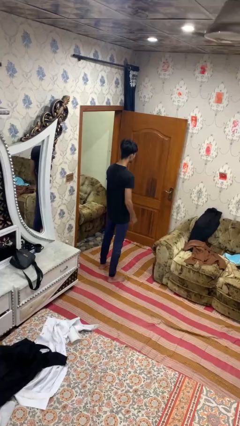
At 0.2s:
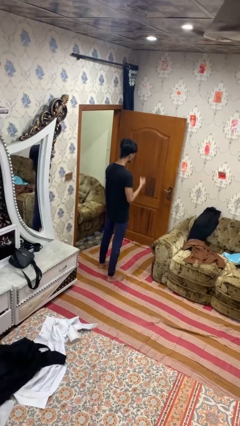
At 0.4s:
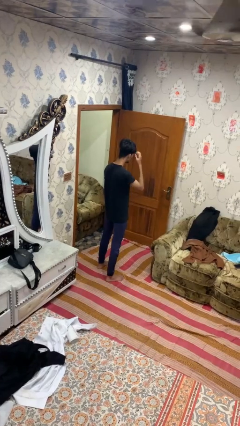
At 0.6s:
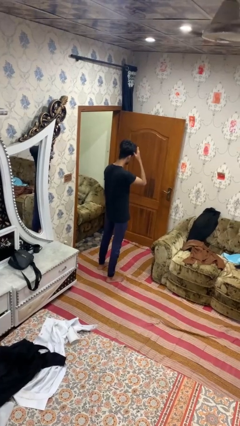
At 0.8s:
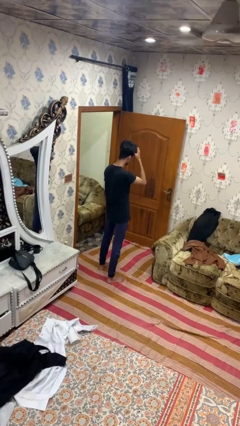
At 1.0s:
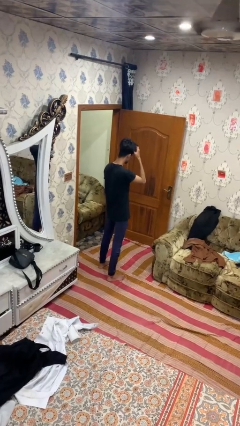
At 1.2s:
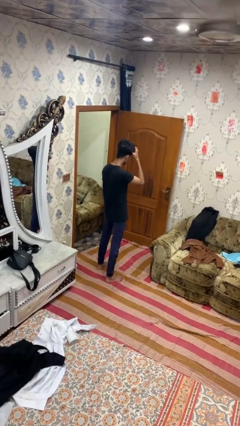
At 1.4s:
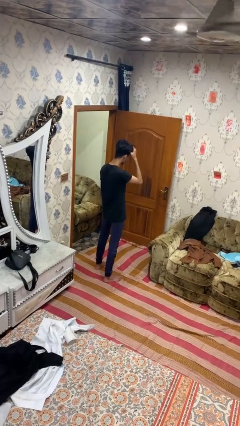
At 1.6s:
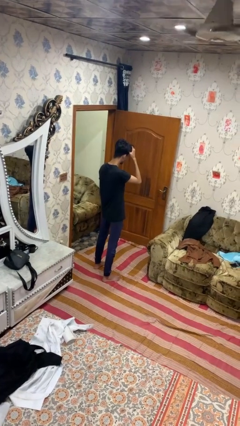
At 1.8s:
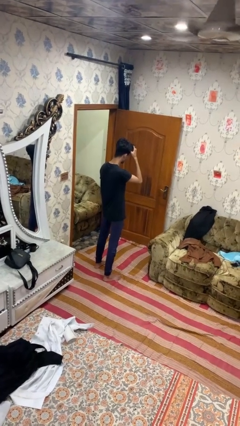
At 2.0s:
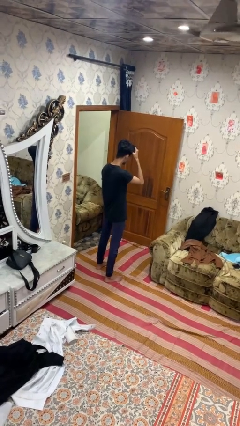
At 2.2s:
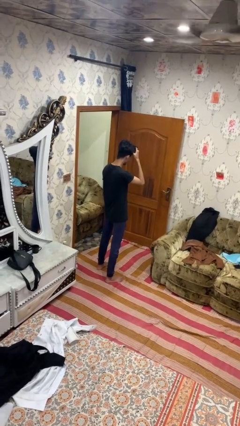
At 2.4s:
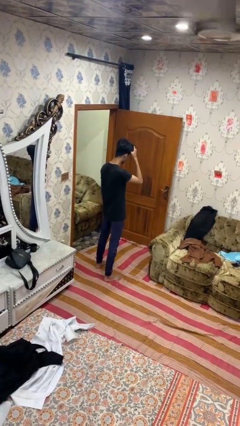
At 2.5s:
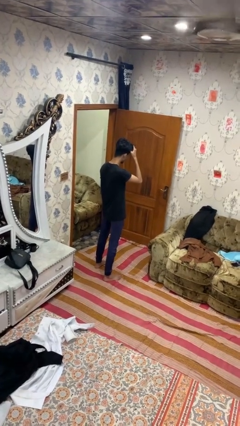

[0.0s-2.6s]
person strokes hair

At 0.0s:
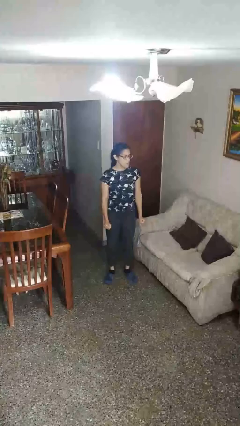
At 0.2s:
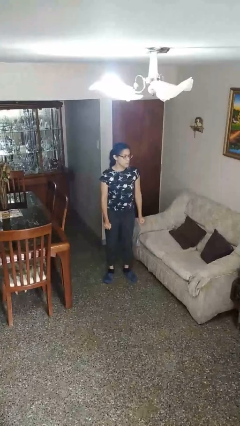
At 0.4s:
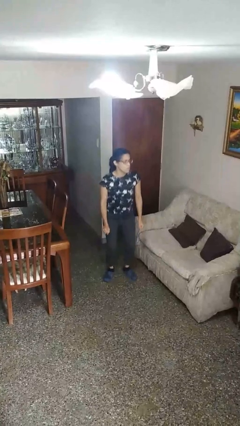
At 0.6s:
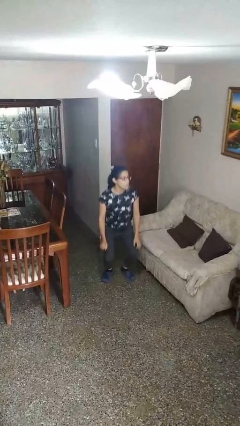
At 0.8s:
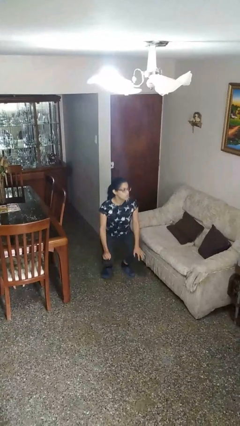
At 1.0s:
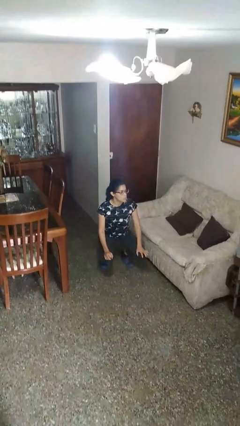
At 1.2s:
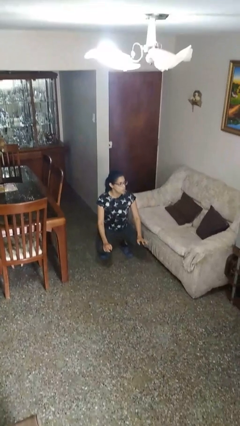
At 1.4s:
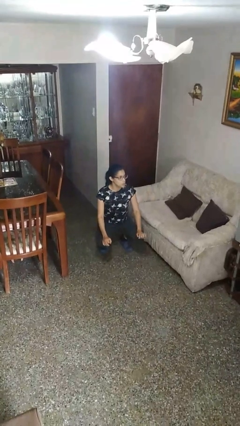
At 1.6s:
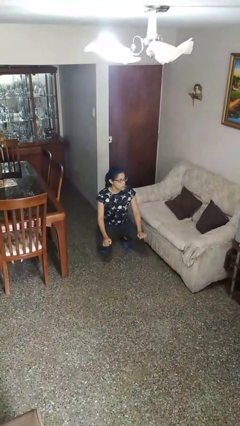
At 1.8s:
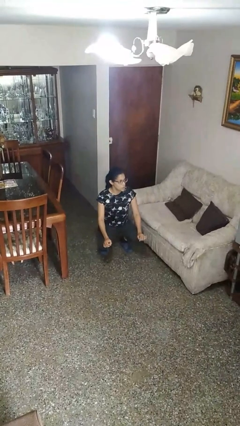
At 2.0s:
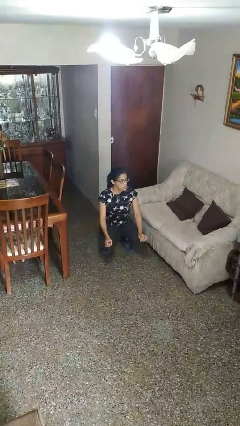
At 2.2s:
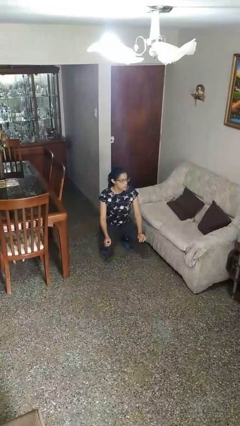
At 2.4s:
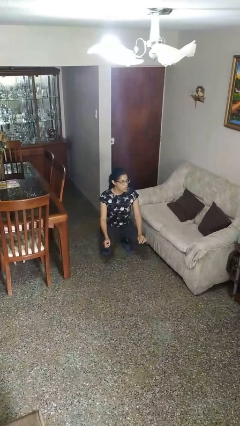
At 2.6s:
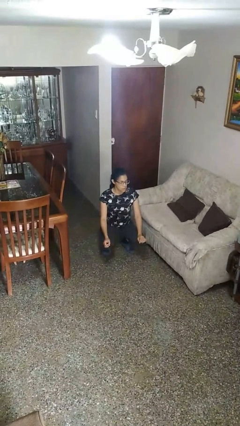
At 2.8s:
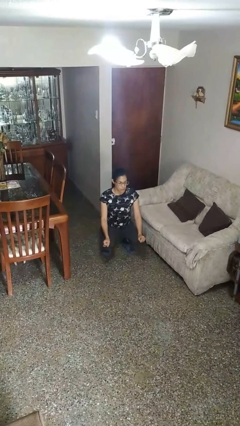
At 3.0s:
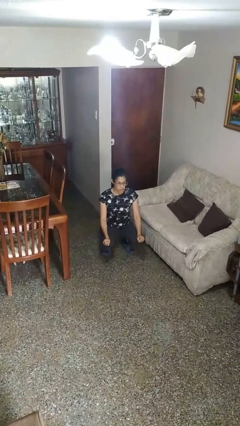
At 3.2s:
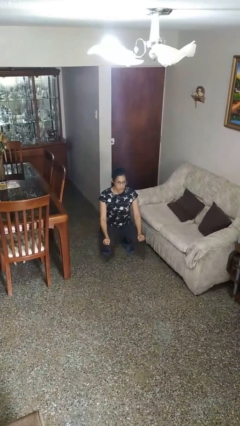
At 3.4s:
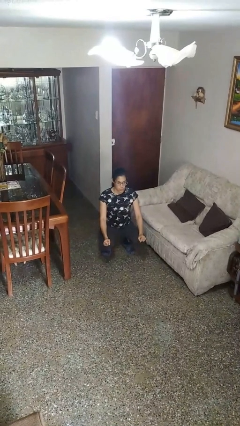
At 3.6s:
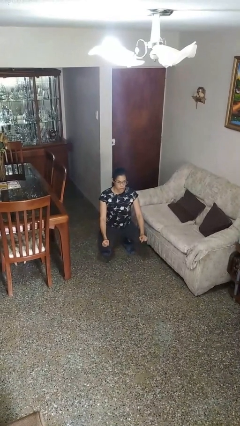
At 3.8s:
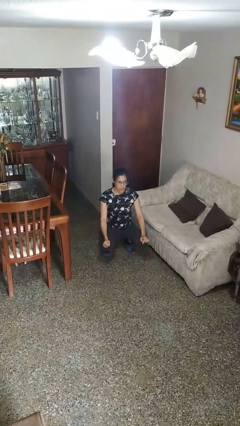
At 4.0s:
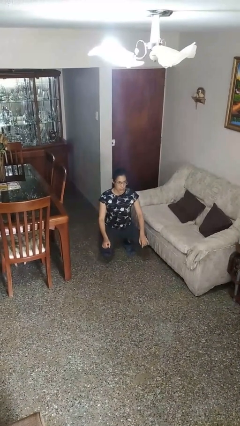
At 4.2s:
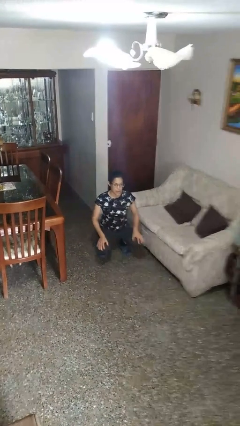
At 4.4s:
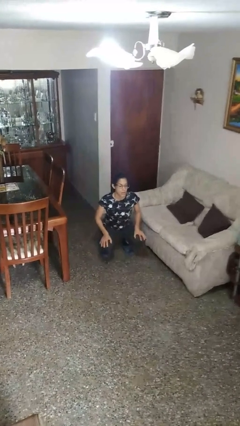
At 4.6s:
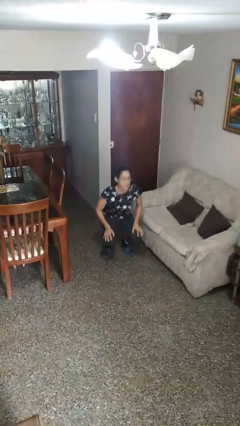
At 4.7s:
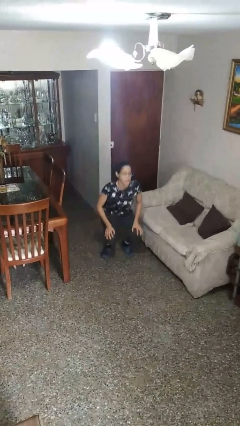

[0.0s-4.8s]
person squats

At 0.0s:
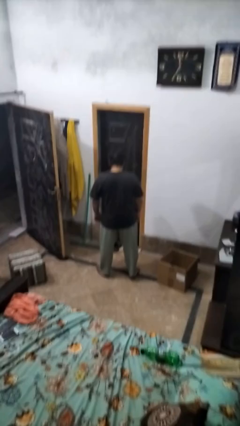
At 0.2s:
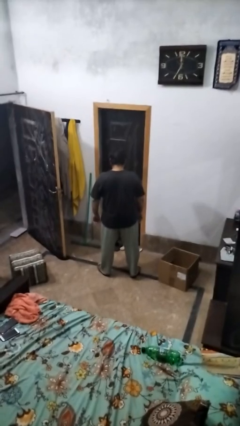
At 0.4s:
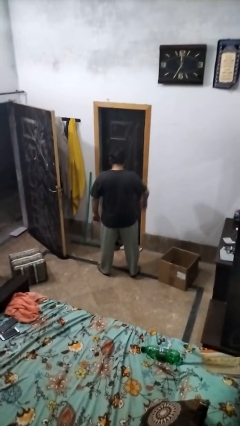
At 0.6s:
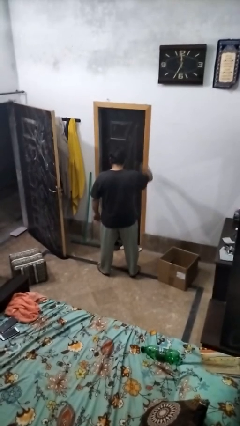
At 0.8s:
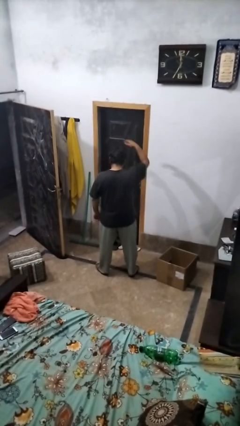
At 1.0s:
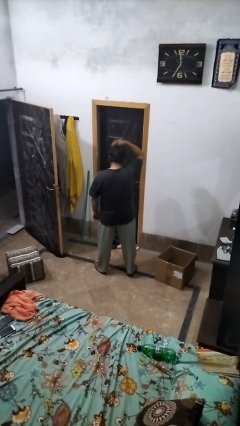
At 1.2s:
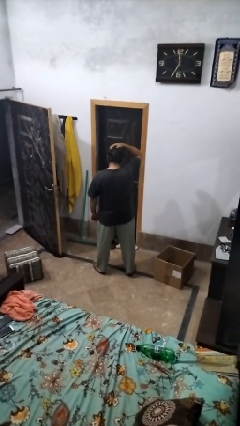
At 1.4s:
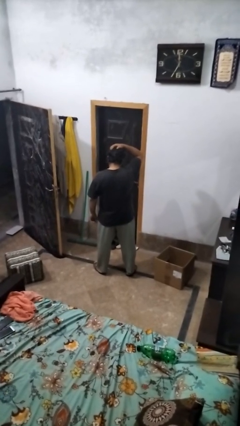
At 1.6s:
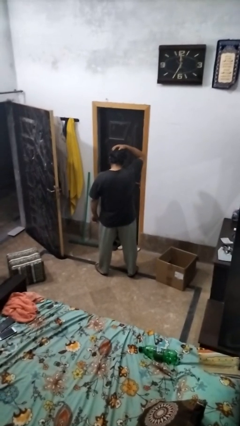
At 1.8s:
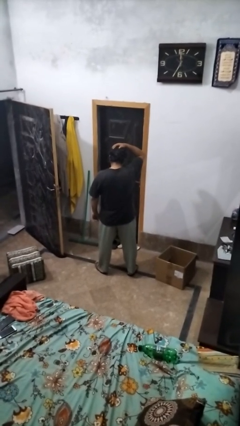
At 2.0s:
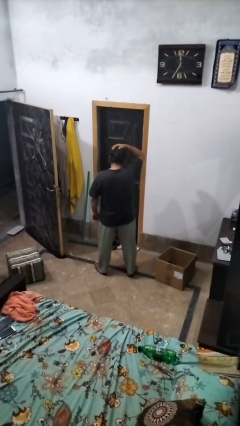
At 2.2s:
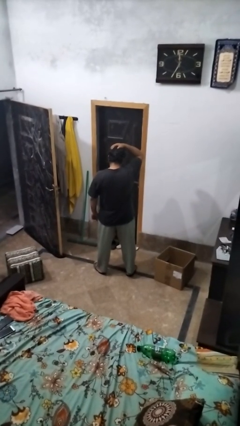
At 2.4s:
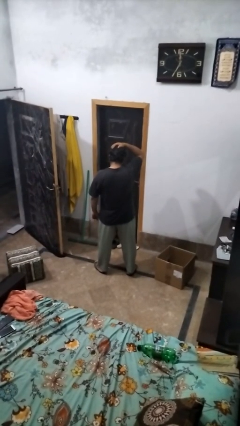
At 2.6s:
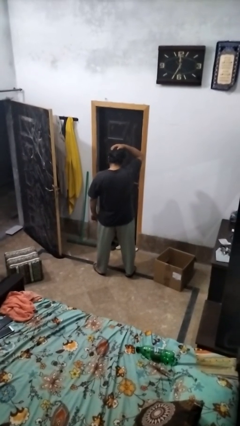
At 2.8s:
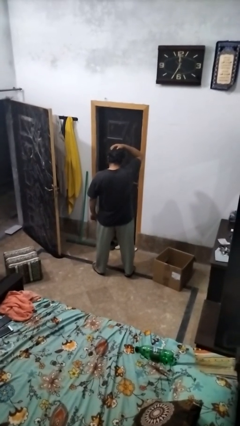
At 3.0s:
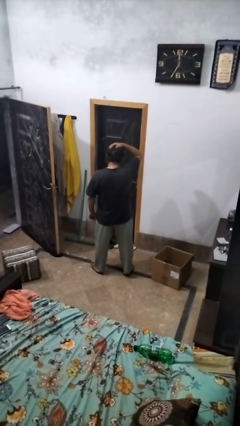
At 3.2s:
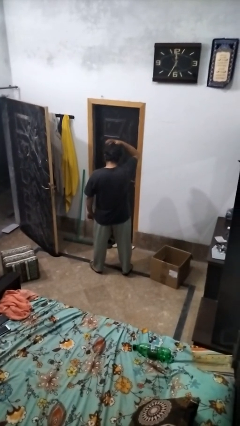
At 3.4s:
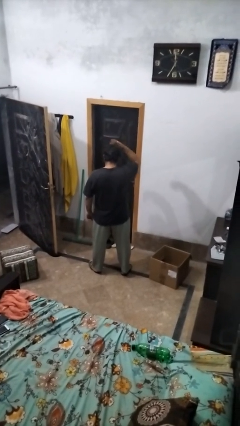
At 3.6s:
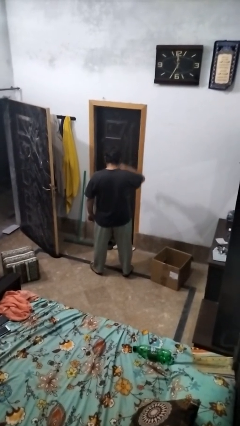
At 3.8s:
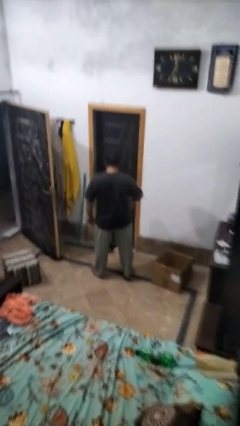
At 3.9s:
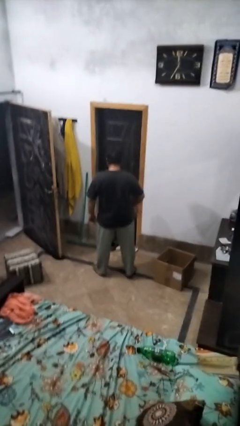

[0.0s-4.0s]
person pats head

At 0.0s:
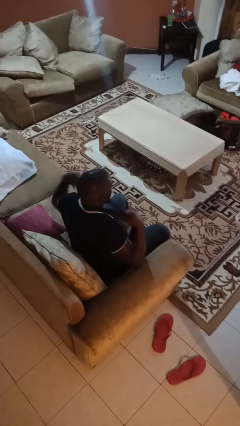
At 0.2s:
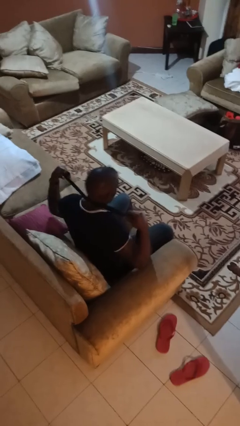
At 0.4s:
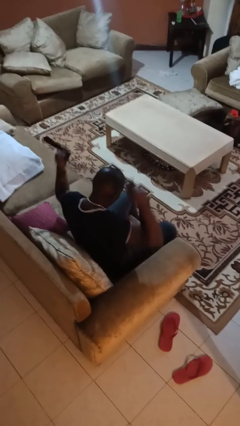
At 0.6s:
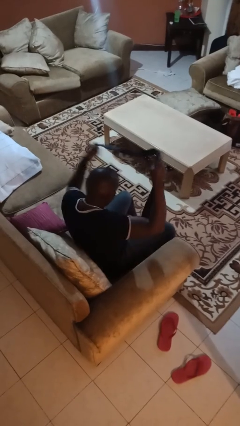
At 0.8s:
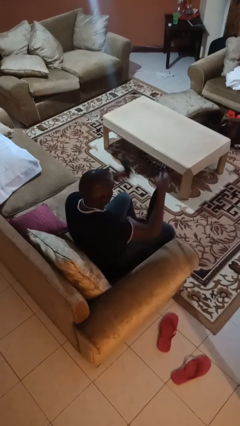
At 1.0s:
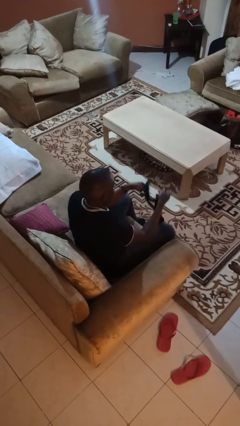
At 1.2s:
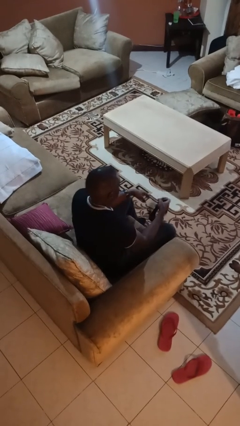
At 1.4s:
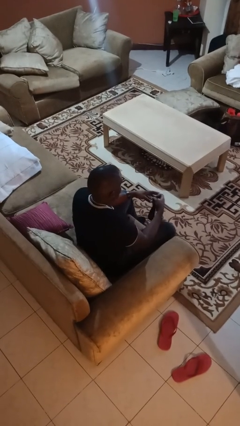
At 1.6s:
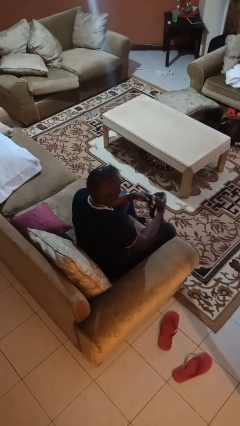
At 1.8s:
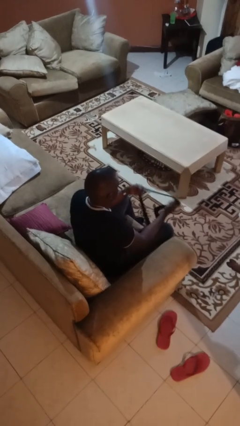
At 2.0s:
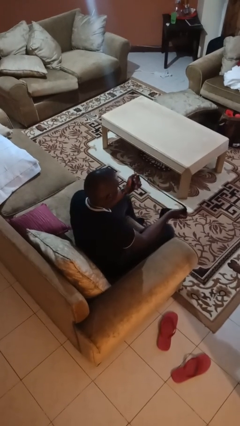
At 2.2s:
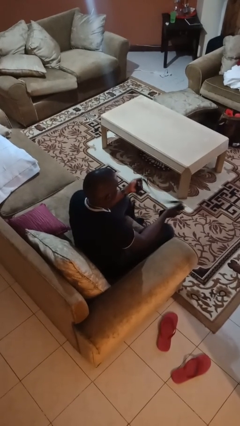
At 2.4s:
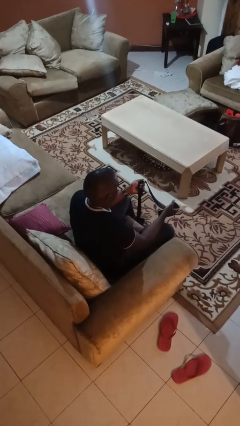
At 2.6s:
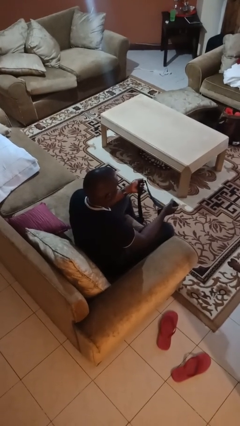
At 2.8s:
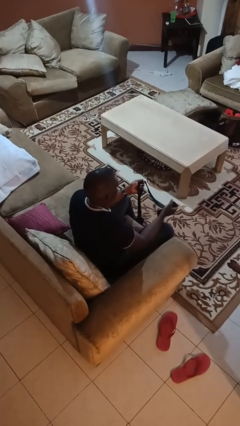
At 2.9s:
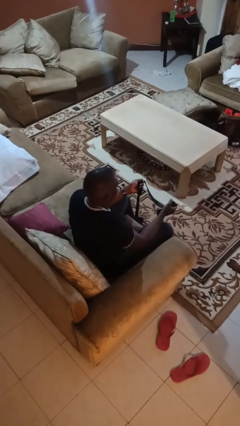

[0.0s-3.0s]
person takes off necktie

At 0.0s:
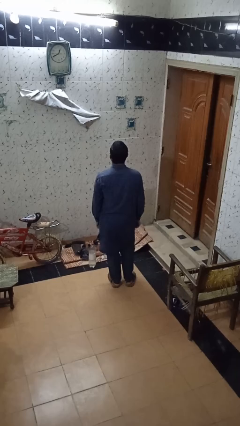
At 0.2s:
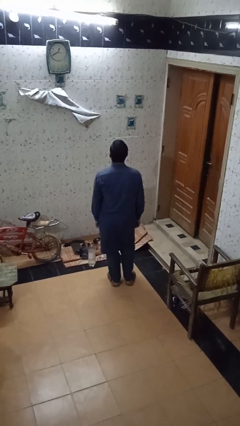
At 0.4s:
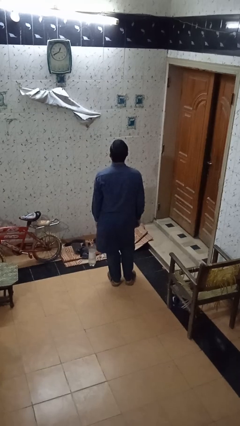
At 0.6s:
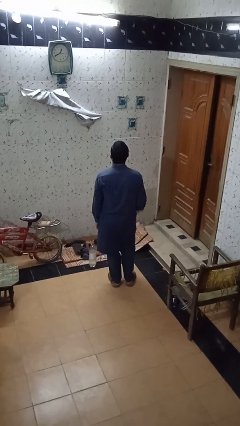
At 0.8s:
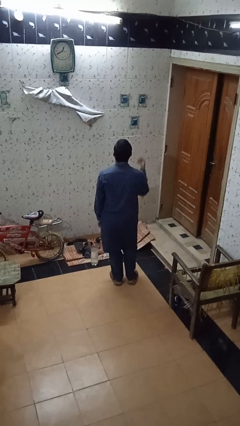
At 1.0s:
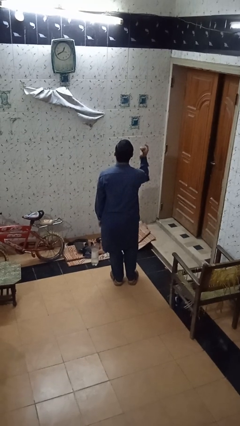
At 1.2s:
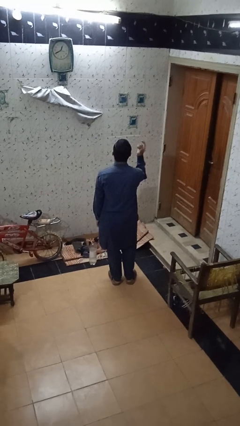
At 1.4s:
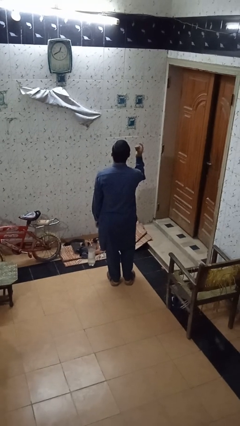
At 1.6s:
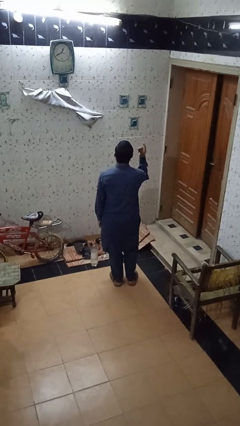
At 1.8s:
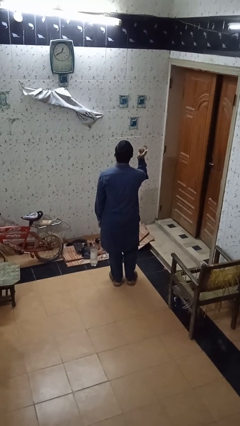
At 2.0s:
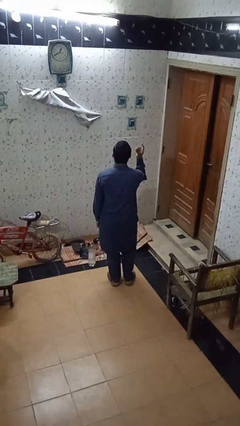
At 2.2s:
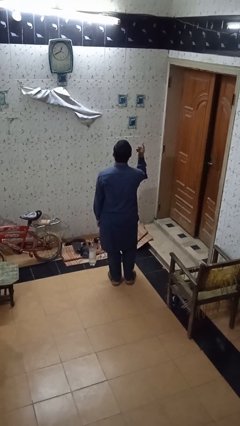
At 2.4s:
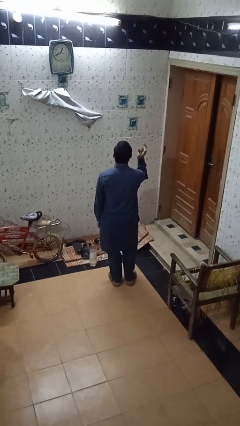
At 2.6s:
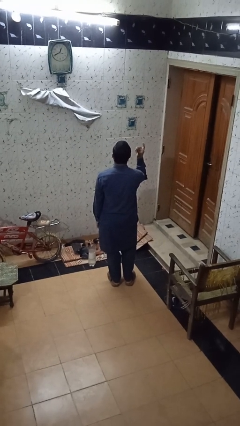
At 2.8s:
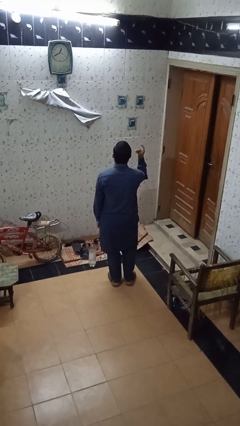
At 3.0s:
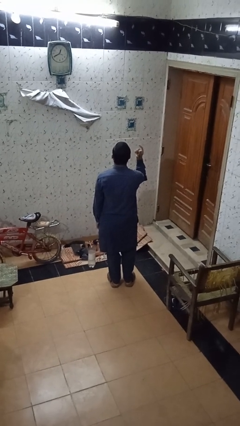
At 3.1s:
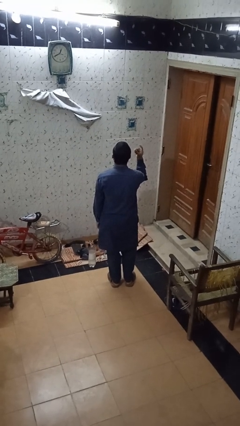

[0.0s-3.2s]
person snaps fingers

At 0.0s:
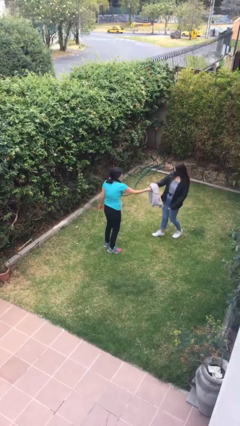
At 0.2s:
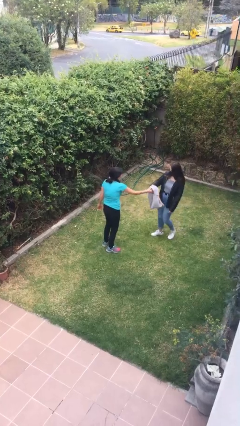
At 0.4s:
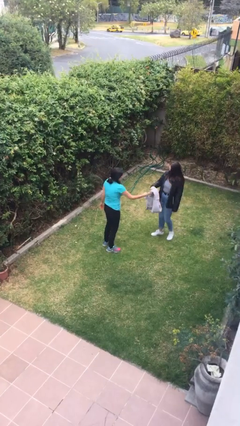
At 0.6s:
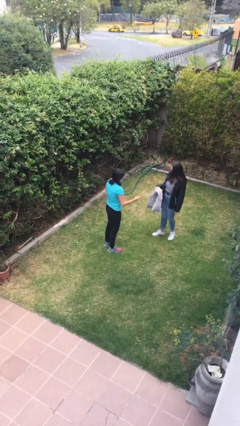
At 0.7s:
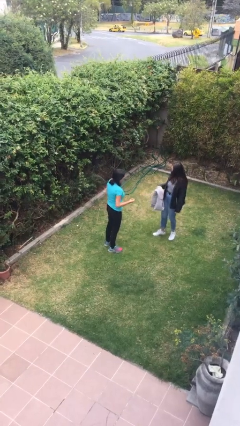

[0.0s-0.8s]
person transfers object to person
